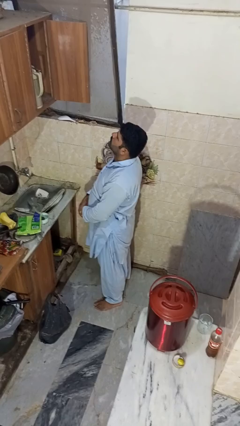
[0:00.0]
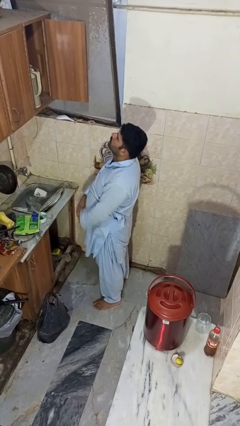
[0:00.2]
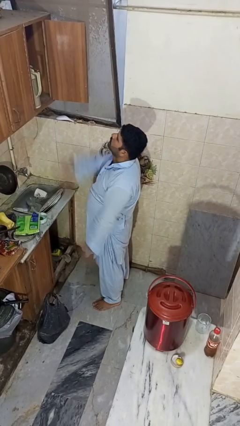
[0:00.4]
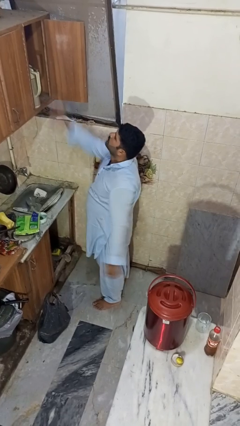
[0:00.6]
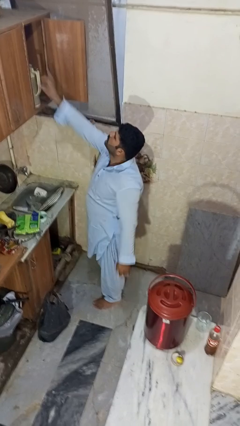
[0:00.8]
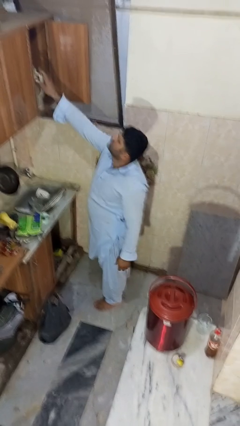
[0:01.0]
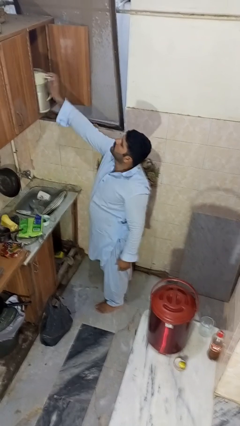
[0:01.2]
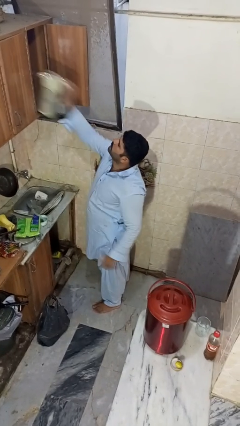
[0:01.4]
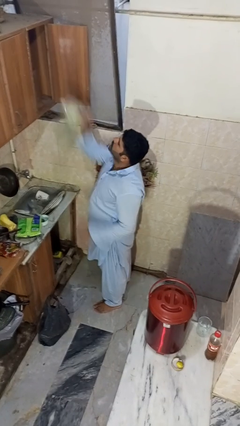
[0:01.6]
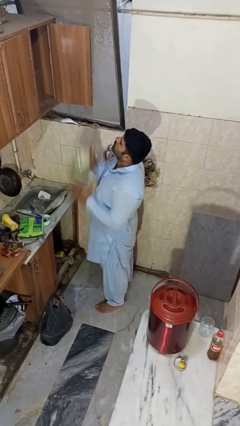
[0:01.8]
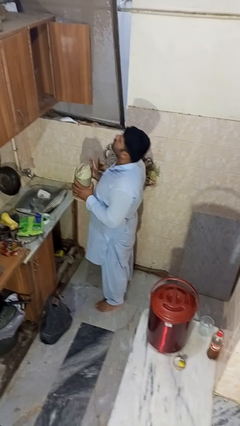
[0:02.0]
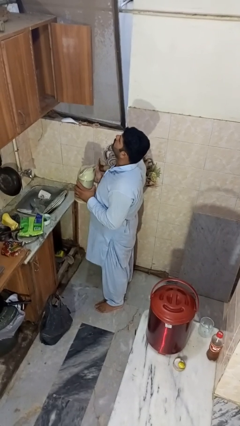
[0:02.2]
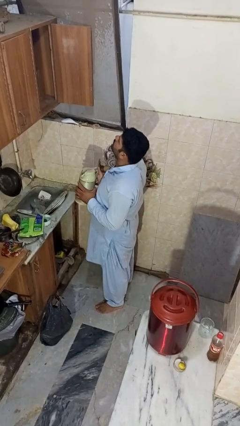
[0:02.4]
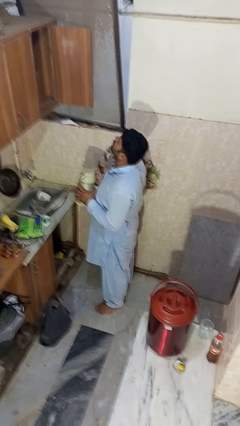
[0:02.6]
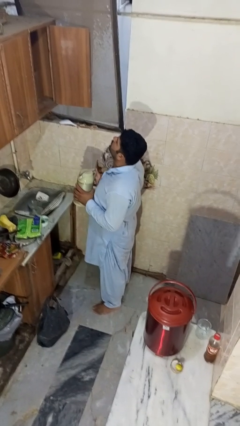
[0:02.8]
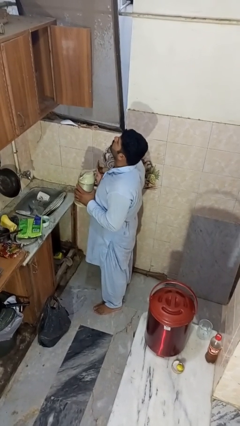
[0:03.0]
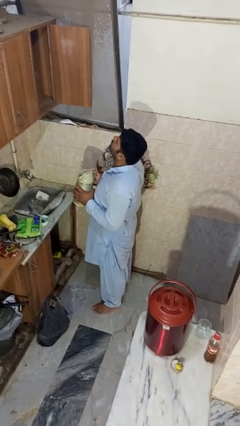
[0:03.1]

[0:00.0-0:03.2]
person takes object from cabinet

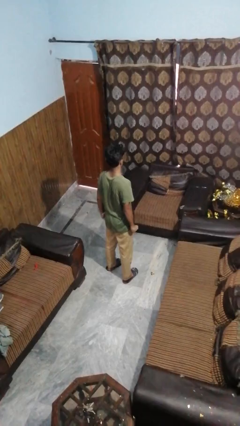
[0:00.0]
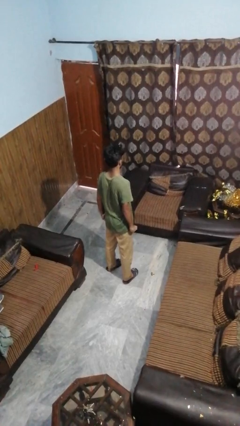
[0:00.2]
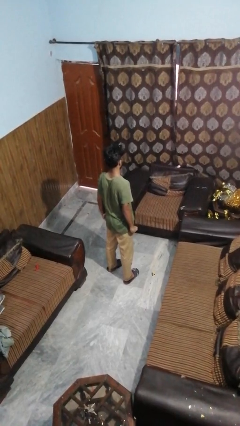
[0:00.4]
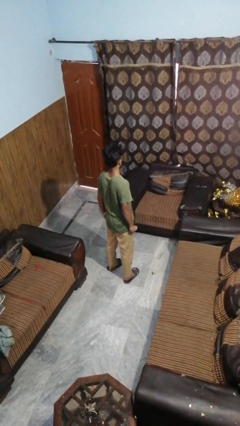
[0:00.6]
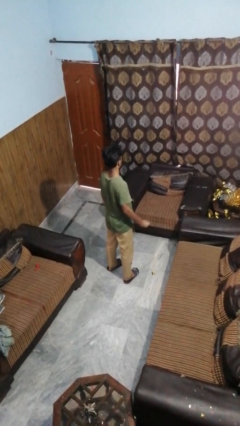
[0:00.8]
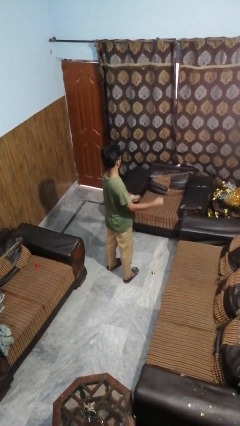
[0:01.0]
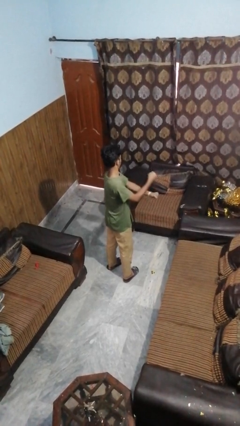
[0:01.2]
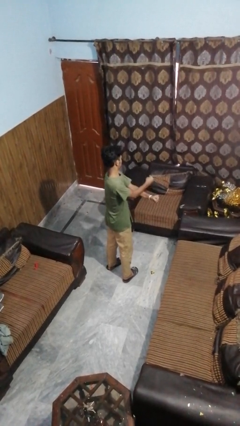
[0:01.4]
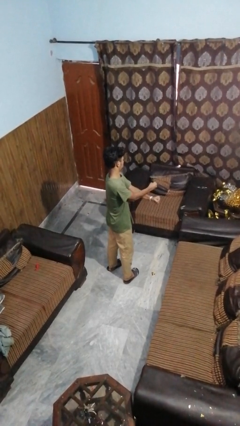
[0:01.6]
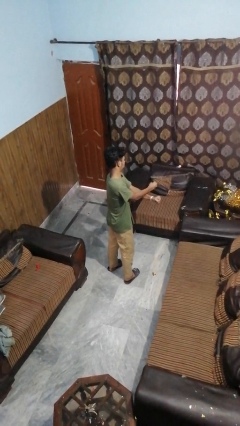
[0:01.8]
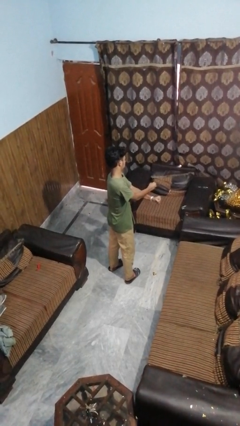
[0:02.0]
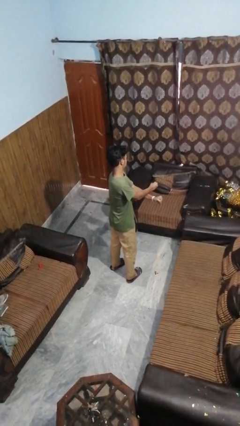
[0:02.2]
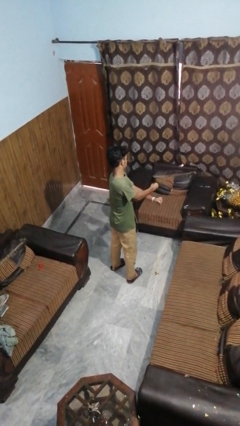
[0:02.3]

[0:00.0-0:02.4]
person gestures arms x

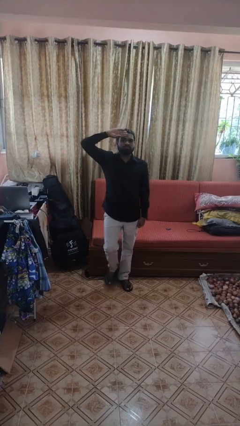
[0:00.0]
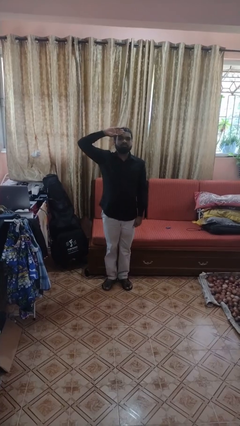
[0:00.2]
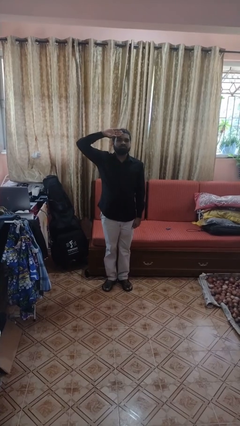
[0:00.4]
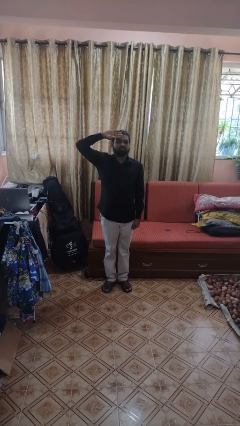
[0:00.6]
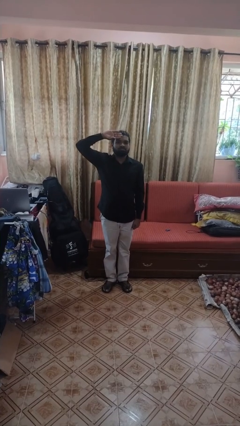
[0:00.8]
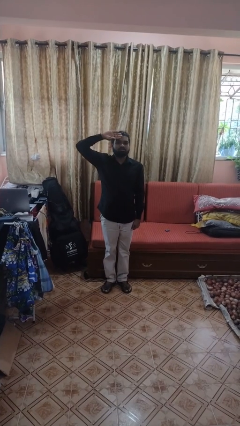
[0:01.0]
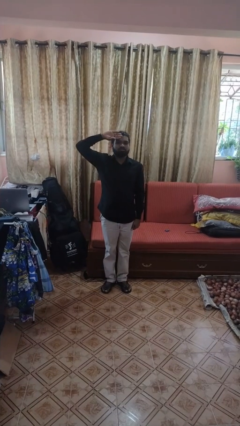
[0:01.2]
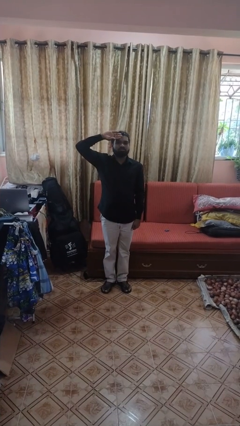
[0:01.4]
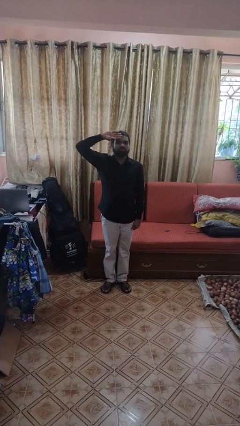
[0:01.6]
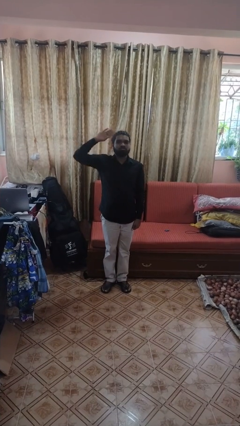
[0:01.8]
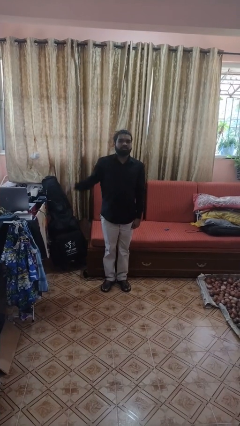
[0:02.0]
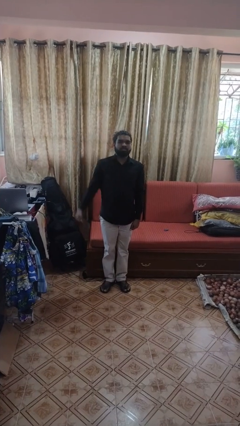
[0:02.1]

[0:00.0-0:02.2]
person salutes

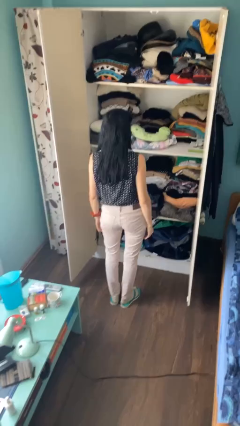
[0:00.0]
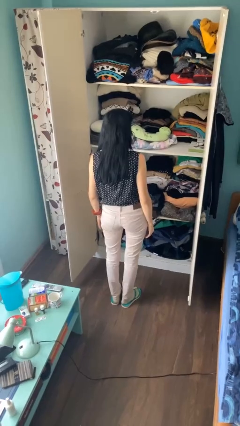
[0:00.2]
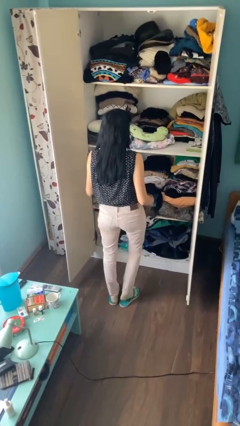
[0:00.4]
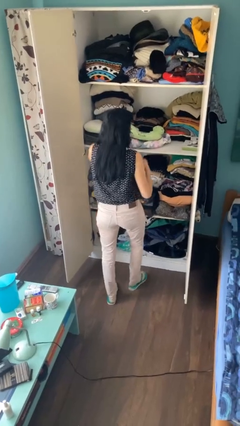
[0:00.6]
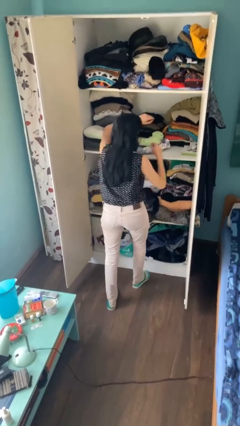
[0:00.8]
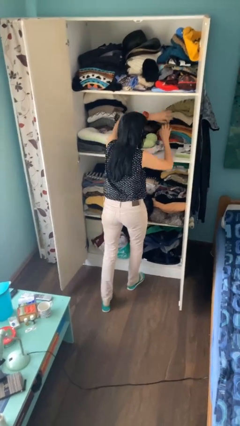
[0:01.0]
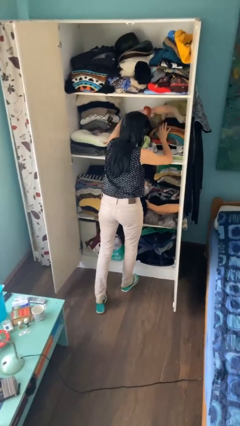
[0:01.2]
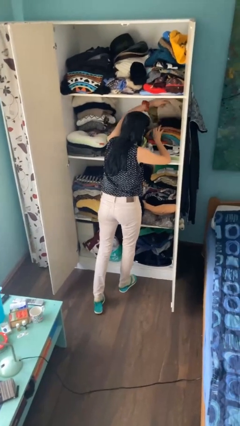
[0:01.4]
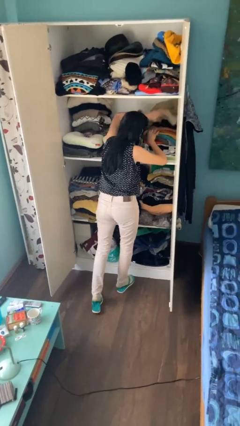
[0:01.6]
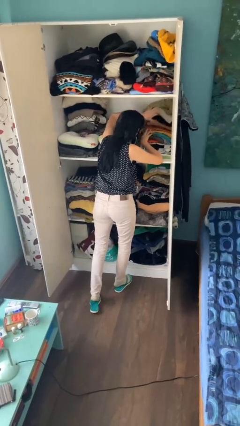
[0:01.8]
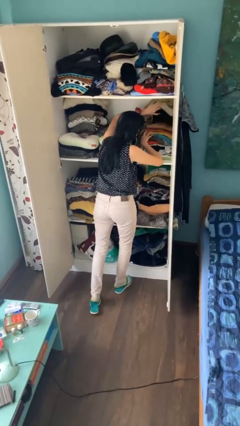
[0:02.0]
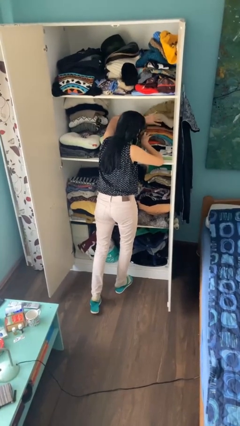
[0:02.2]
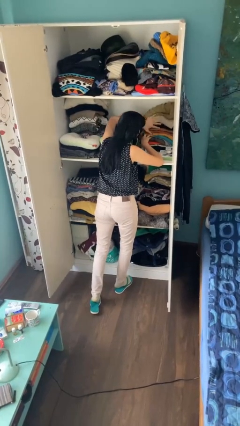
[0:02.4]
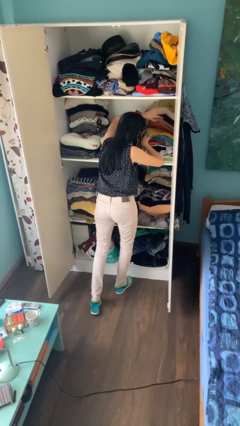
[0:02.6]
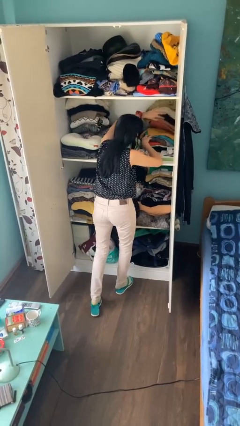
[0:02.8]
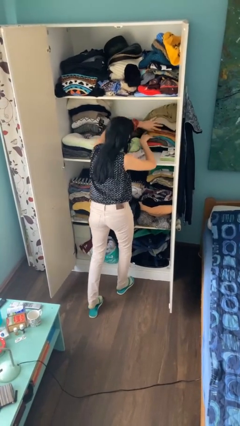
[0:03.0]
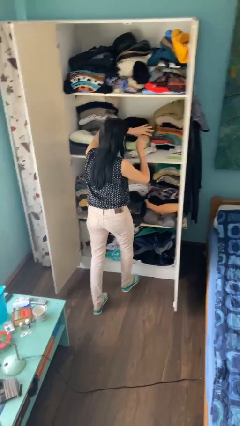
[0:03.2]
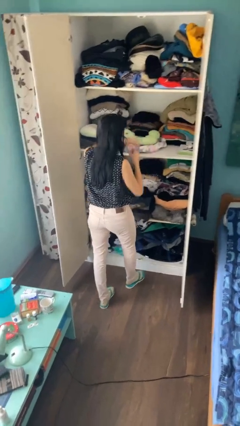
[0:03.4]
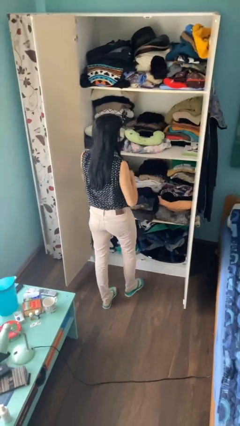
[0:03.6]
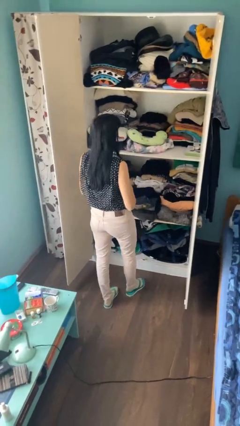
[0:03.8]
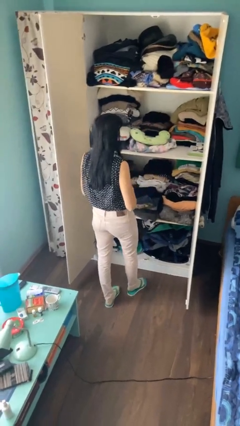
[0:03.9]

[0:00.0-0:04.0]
person searches in cabinet

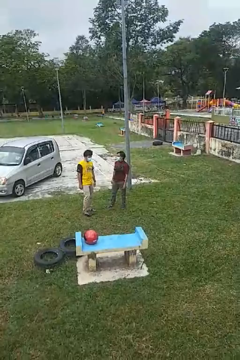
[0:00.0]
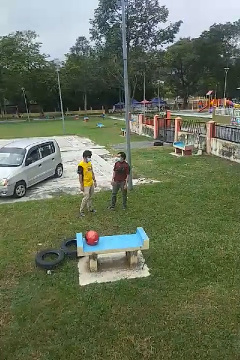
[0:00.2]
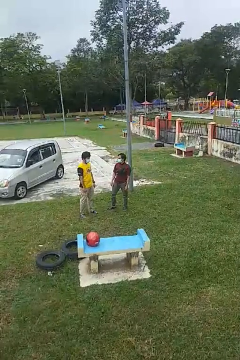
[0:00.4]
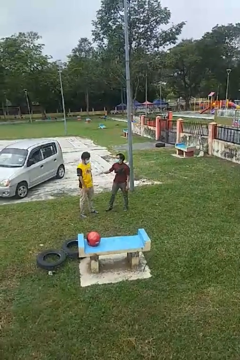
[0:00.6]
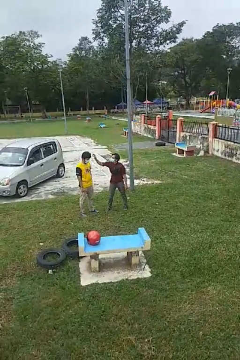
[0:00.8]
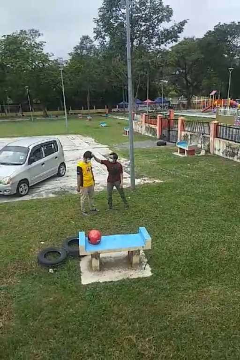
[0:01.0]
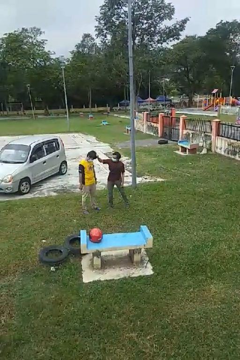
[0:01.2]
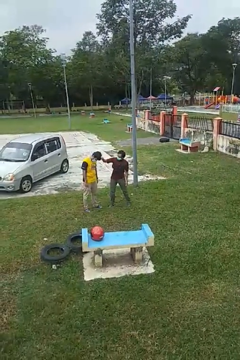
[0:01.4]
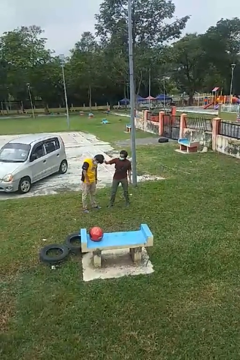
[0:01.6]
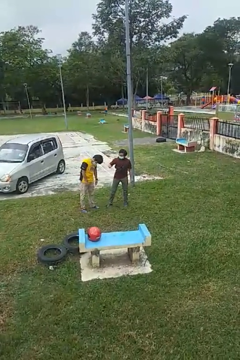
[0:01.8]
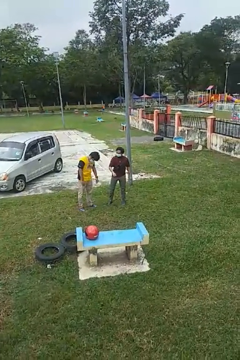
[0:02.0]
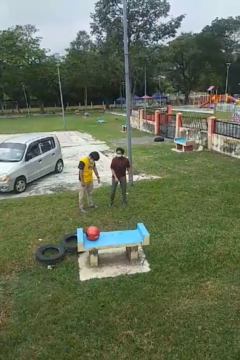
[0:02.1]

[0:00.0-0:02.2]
person grabs person by hair

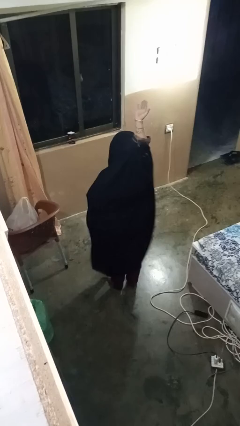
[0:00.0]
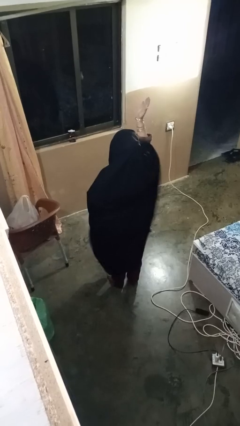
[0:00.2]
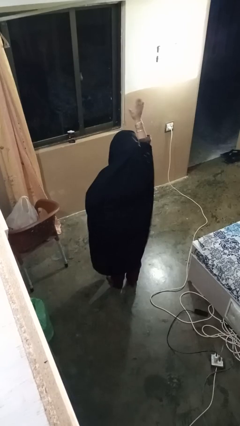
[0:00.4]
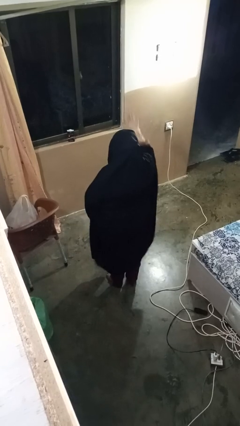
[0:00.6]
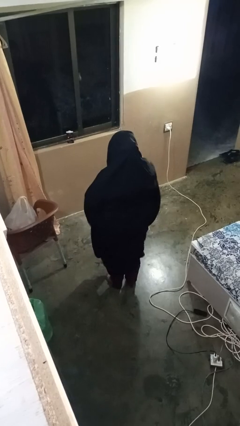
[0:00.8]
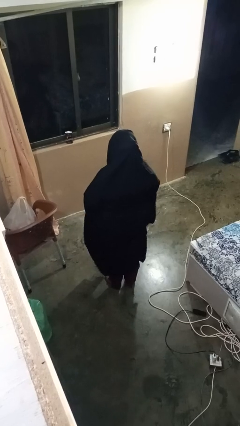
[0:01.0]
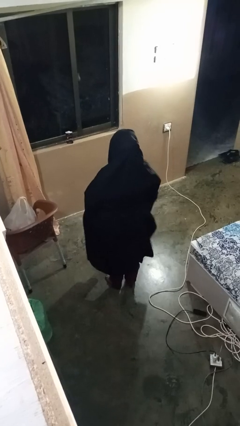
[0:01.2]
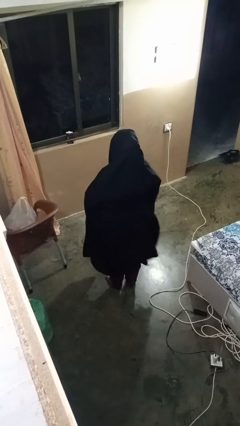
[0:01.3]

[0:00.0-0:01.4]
person gestures swipe down

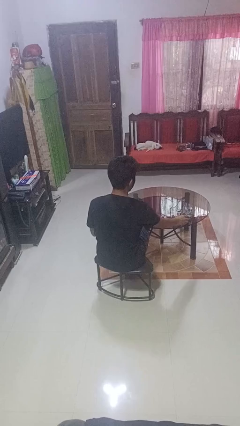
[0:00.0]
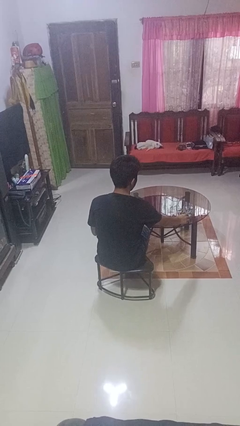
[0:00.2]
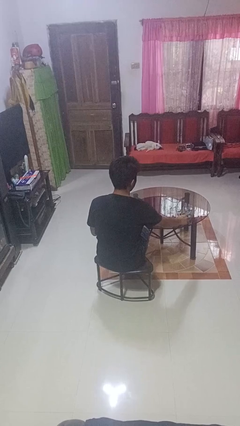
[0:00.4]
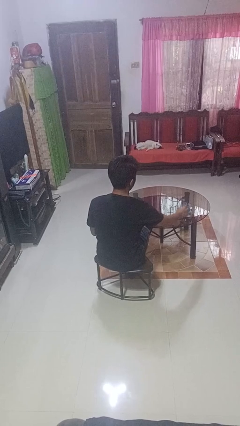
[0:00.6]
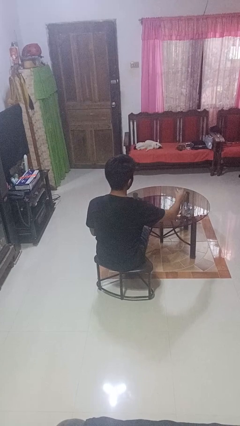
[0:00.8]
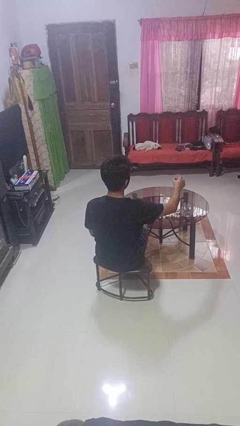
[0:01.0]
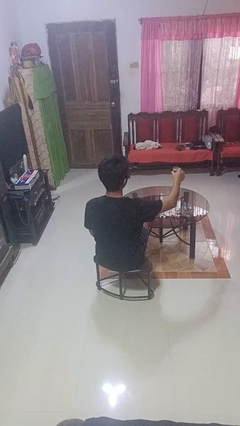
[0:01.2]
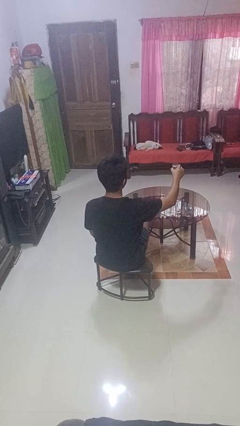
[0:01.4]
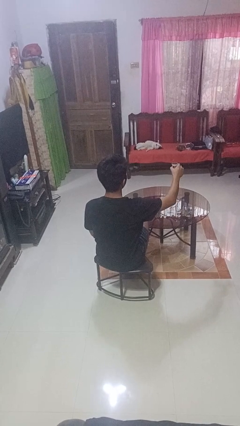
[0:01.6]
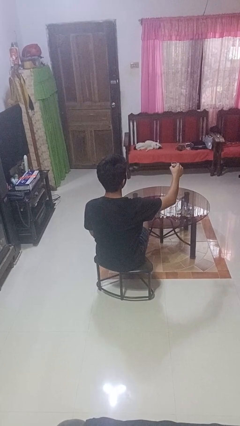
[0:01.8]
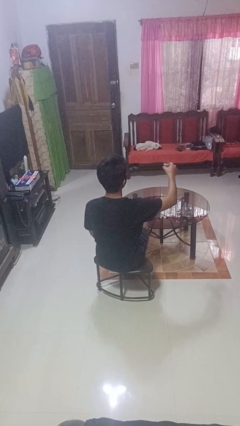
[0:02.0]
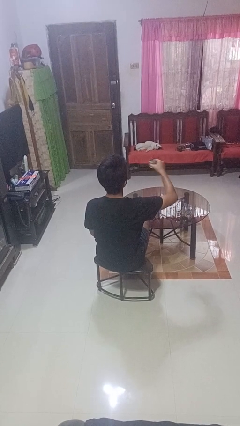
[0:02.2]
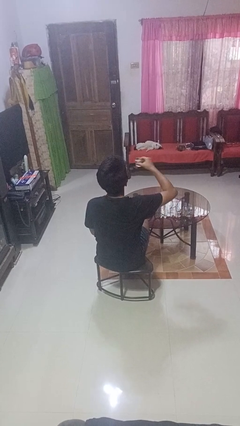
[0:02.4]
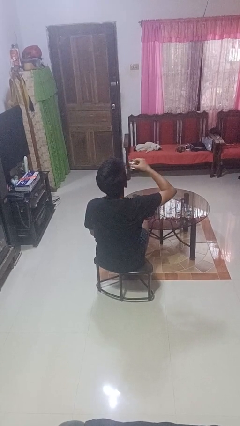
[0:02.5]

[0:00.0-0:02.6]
person picks up object from table
